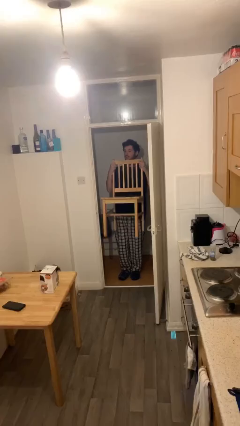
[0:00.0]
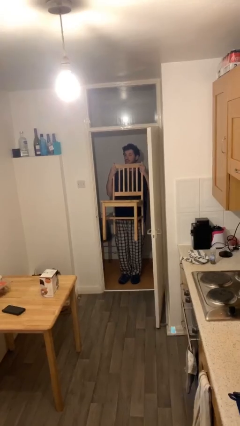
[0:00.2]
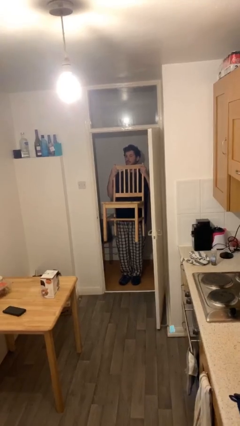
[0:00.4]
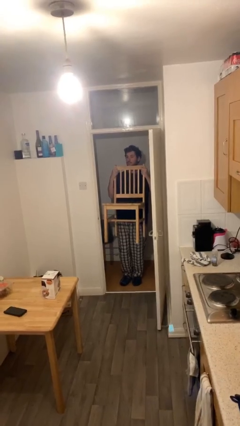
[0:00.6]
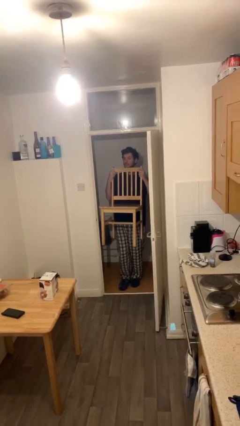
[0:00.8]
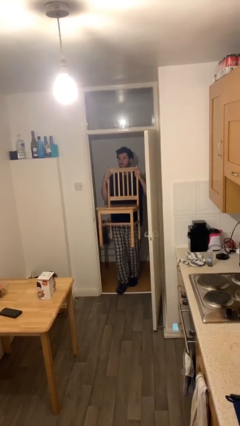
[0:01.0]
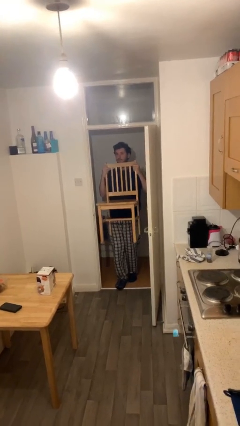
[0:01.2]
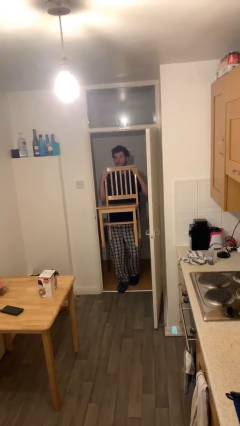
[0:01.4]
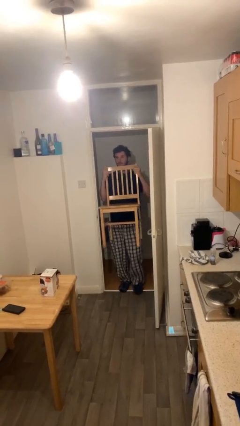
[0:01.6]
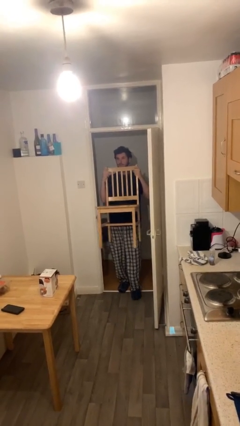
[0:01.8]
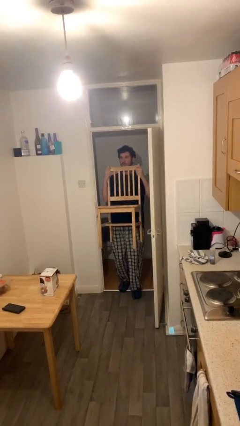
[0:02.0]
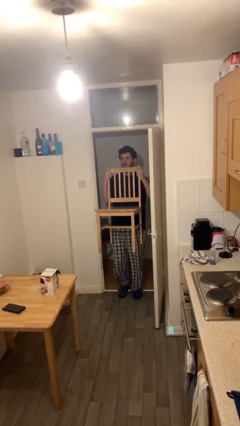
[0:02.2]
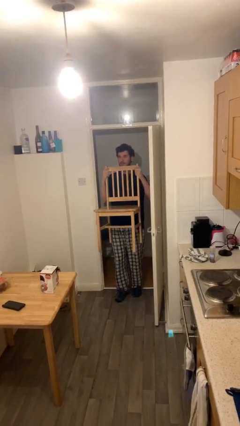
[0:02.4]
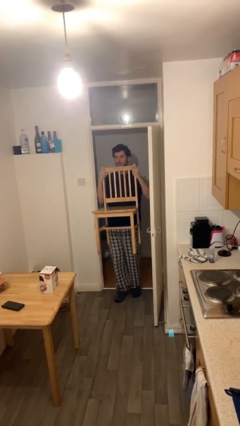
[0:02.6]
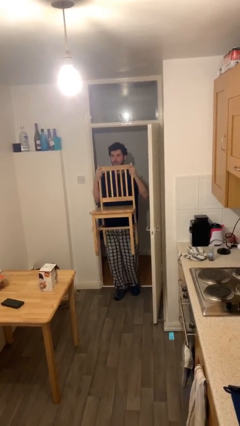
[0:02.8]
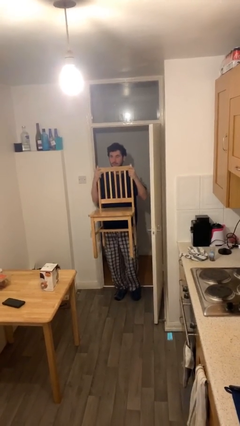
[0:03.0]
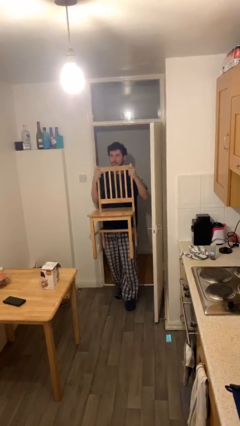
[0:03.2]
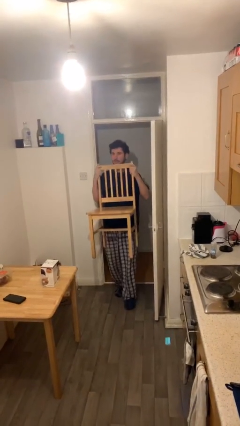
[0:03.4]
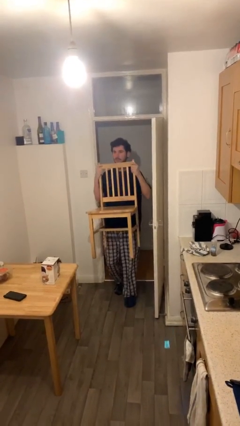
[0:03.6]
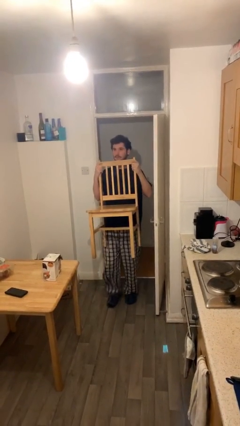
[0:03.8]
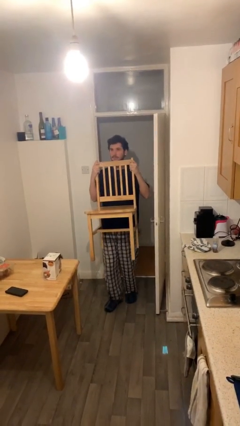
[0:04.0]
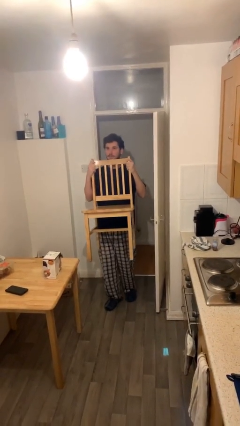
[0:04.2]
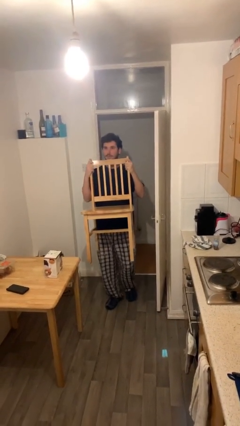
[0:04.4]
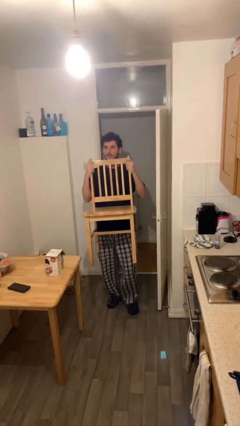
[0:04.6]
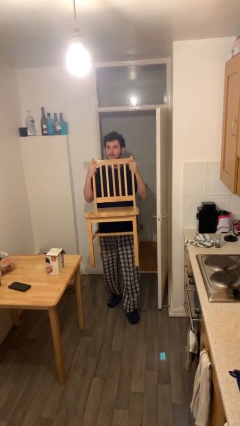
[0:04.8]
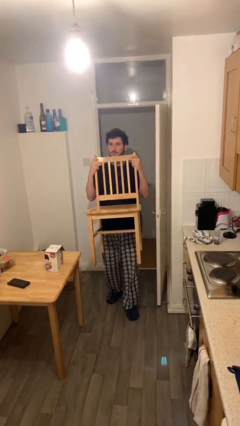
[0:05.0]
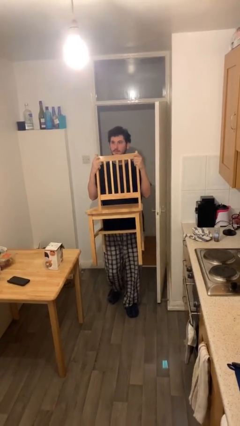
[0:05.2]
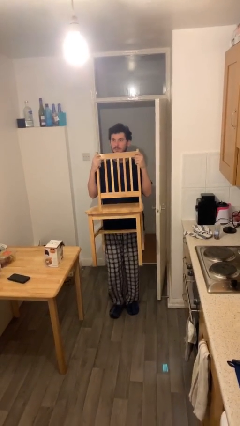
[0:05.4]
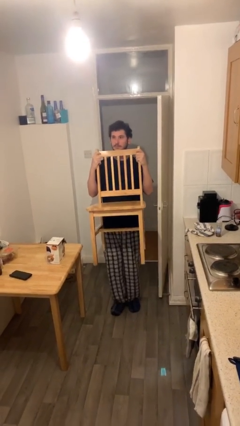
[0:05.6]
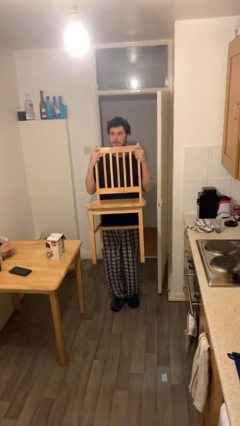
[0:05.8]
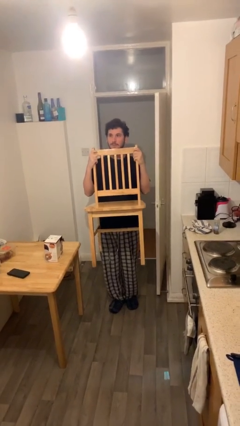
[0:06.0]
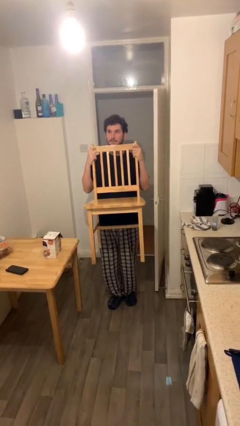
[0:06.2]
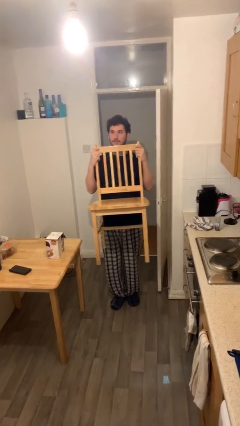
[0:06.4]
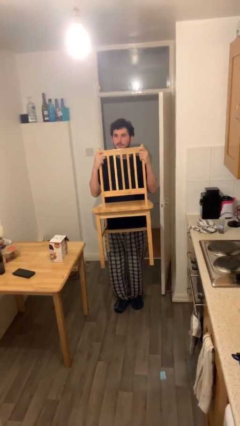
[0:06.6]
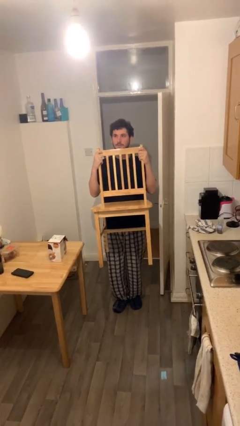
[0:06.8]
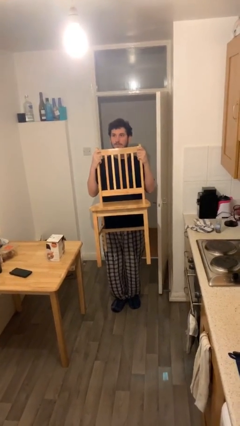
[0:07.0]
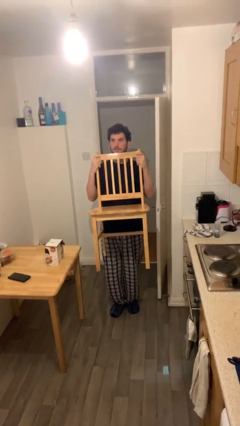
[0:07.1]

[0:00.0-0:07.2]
person carries heavy object

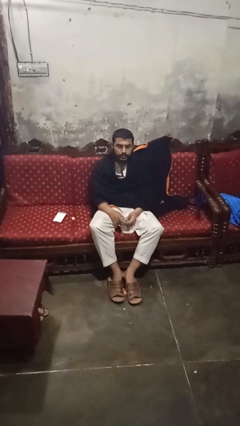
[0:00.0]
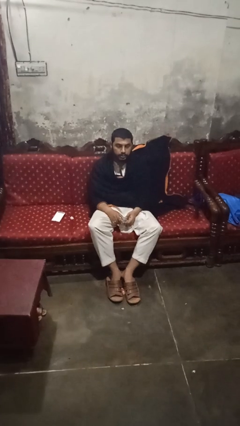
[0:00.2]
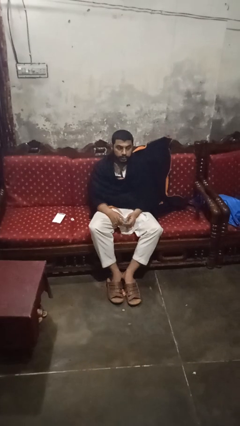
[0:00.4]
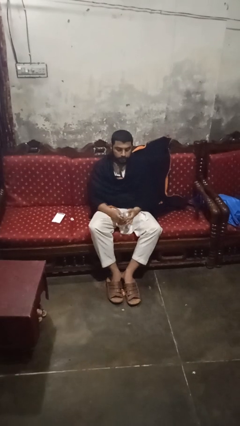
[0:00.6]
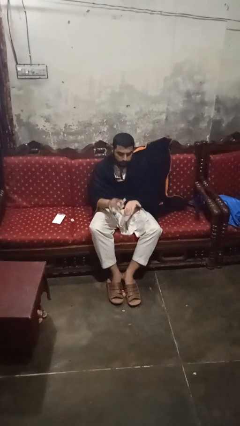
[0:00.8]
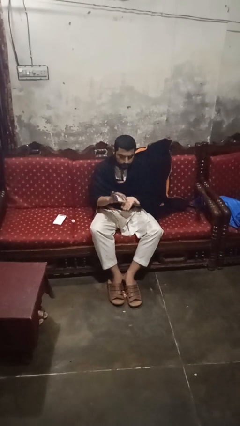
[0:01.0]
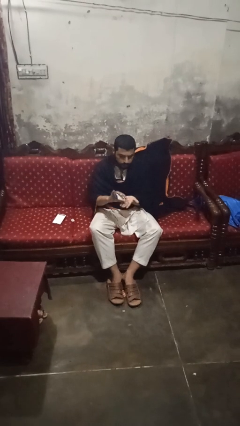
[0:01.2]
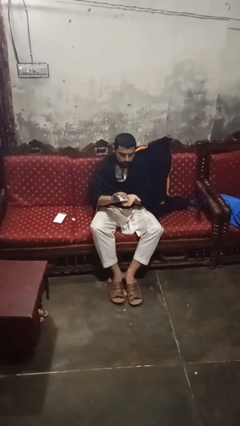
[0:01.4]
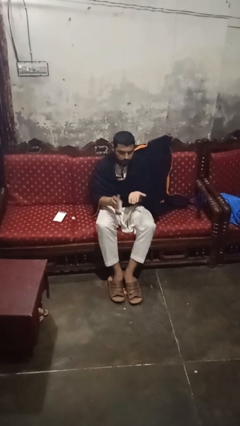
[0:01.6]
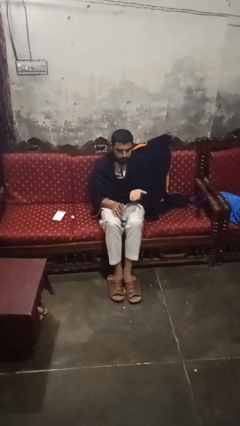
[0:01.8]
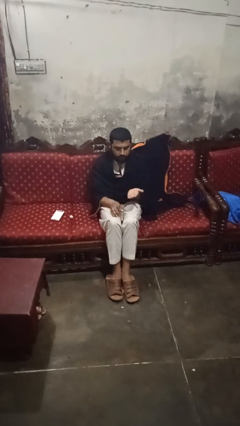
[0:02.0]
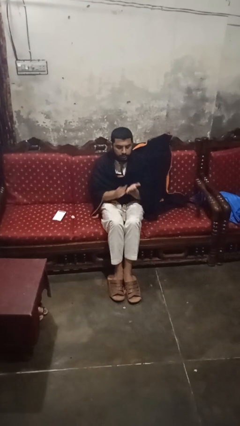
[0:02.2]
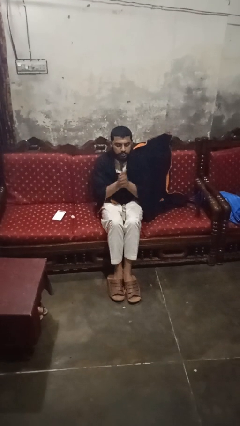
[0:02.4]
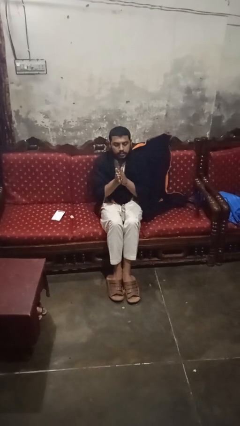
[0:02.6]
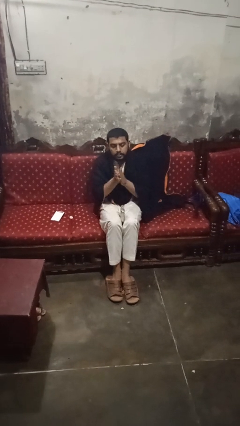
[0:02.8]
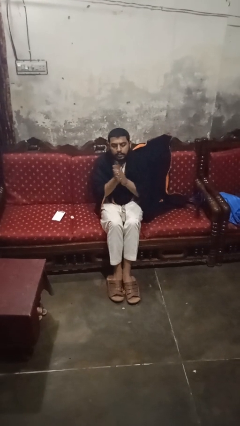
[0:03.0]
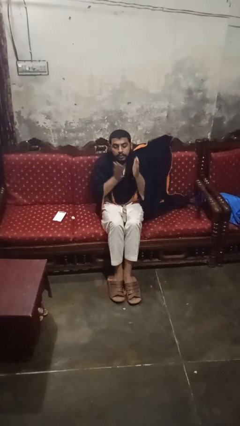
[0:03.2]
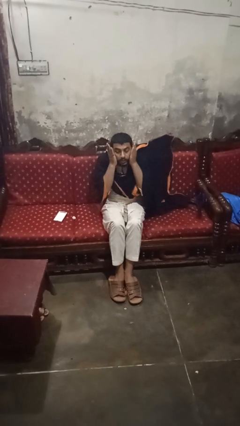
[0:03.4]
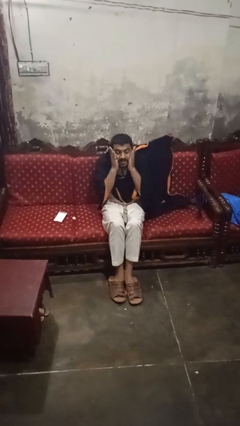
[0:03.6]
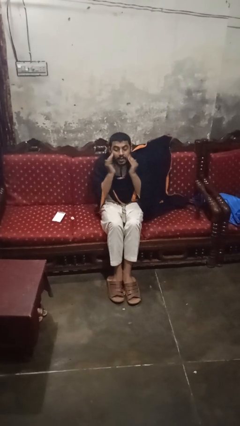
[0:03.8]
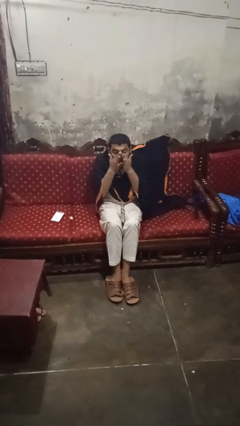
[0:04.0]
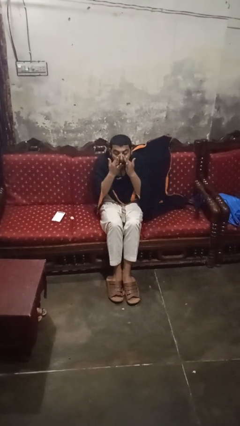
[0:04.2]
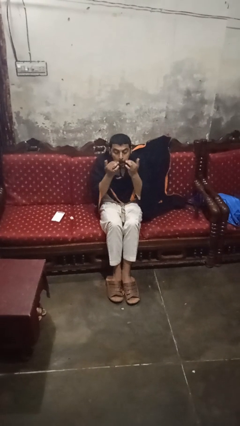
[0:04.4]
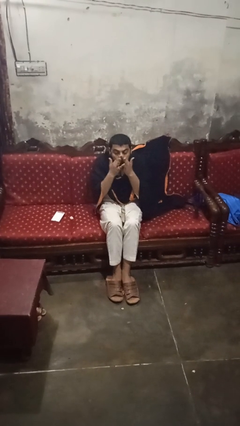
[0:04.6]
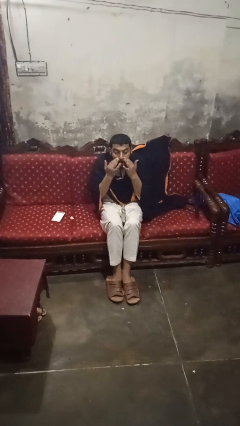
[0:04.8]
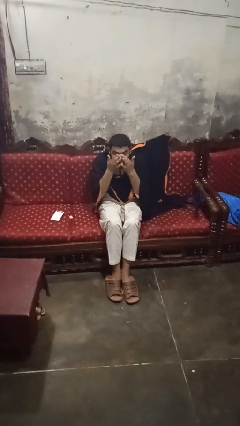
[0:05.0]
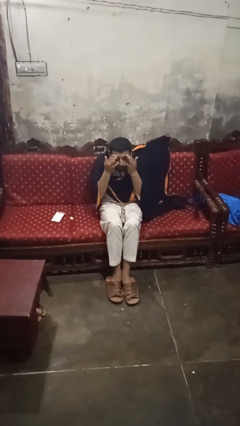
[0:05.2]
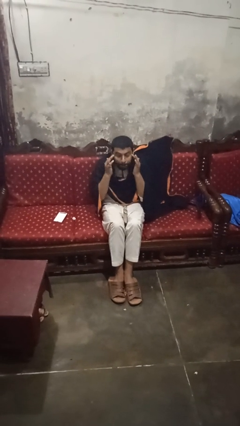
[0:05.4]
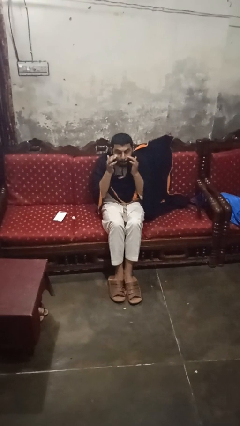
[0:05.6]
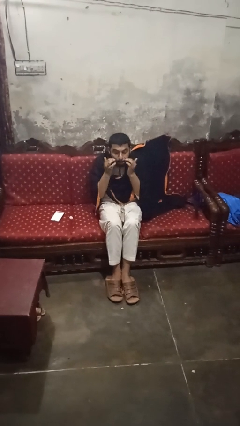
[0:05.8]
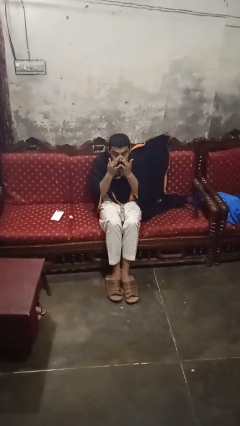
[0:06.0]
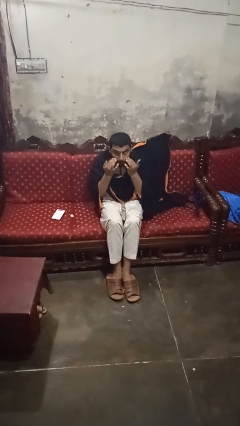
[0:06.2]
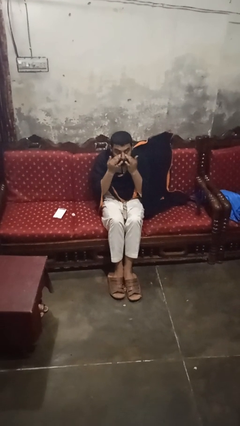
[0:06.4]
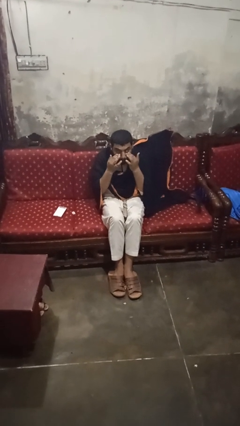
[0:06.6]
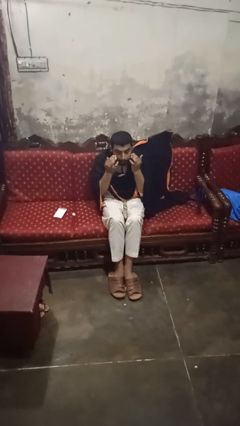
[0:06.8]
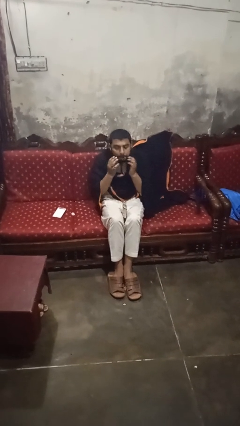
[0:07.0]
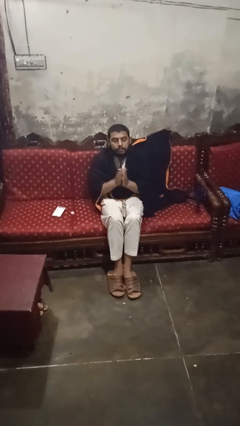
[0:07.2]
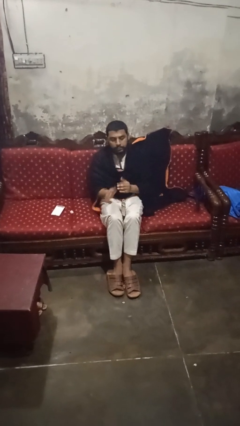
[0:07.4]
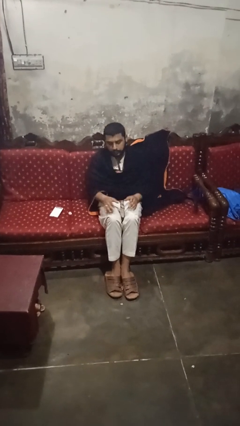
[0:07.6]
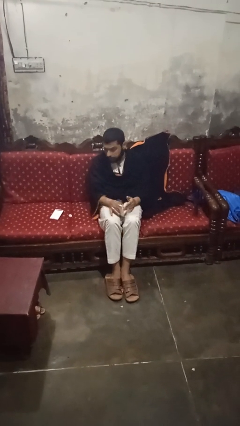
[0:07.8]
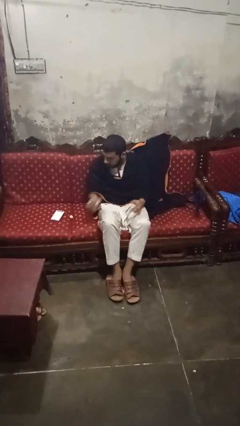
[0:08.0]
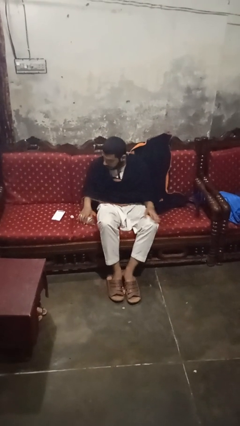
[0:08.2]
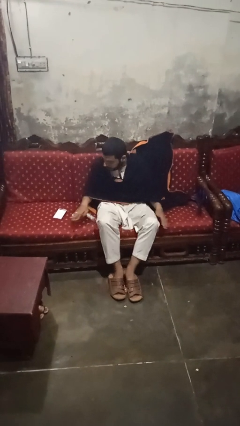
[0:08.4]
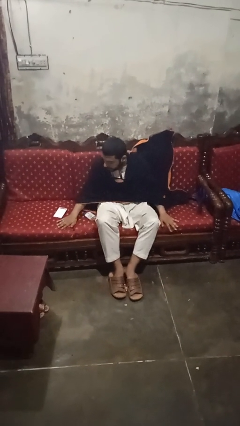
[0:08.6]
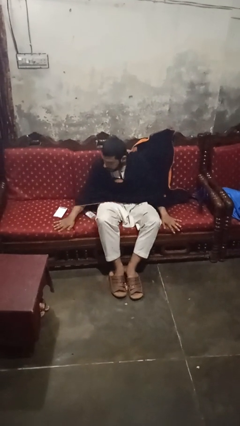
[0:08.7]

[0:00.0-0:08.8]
person applies facial moisturizer

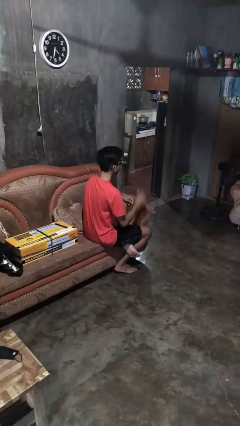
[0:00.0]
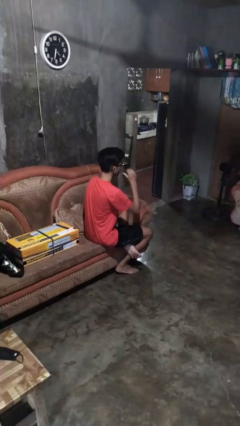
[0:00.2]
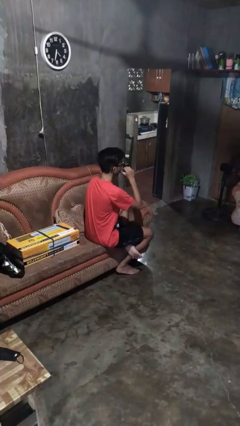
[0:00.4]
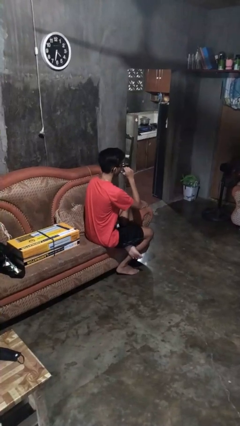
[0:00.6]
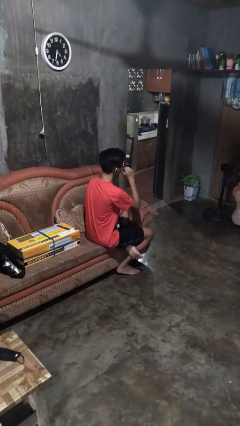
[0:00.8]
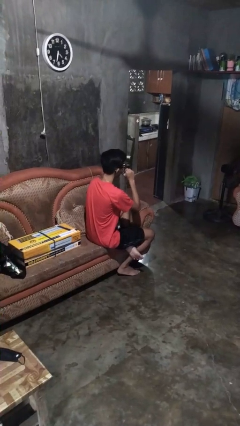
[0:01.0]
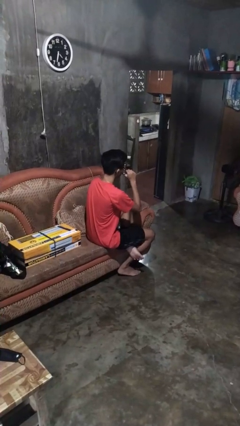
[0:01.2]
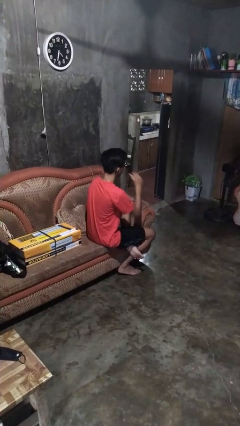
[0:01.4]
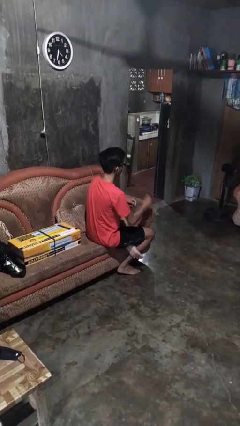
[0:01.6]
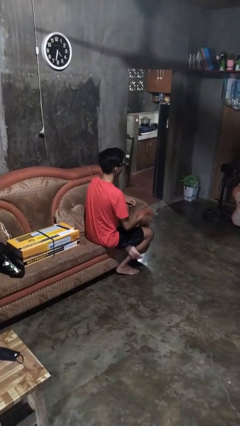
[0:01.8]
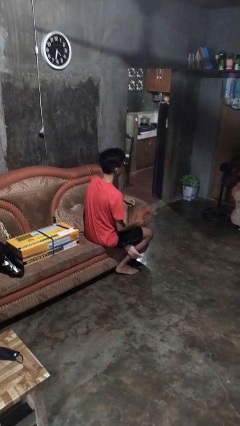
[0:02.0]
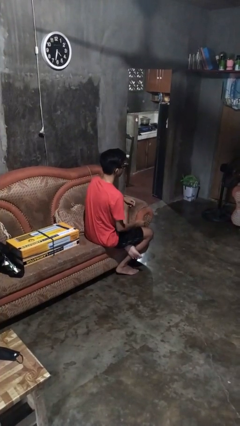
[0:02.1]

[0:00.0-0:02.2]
person licks fingers
